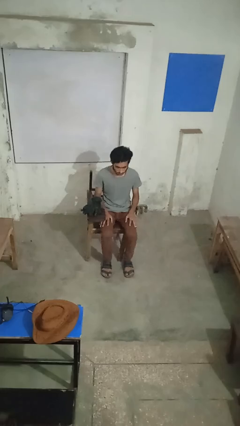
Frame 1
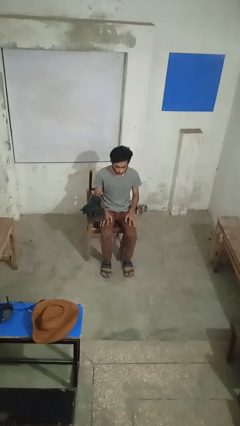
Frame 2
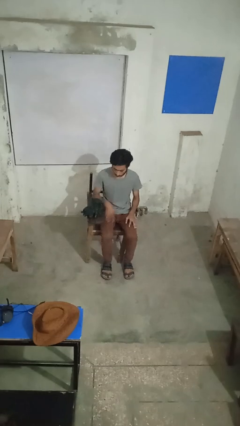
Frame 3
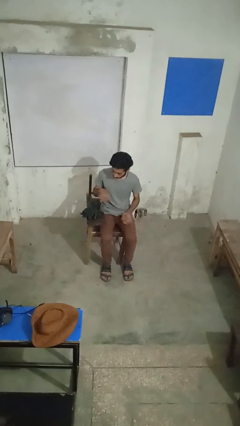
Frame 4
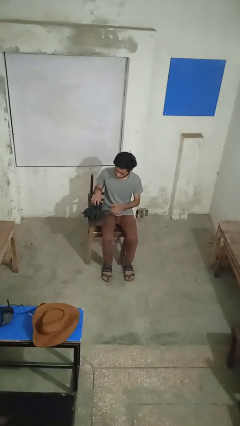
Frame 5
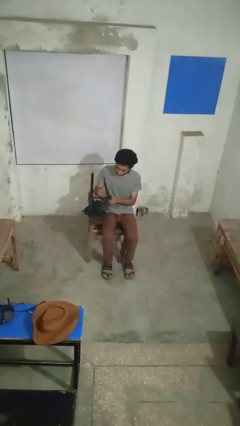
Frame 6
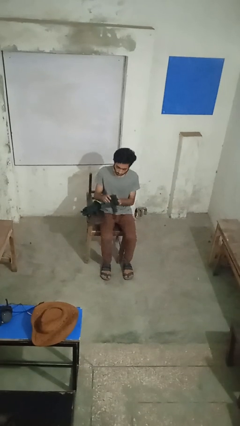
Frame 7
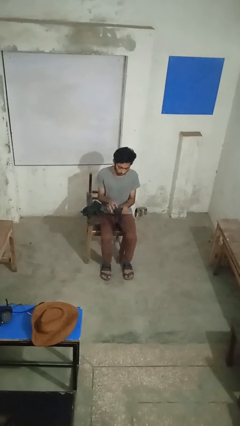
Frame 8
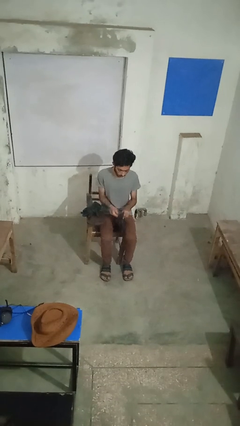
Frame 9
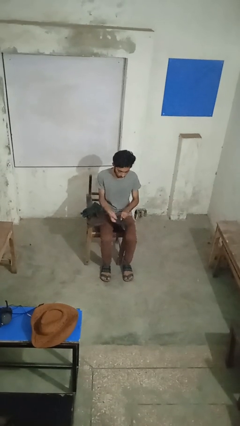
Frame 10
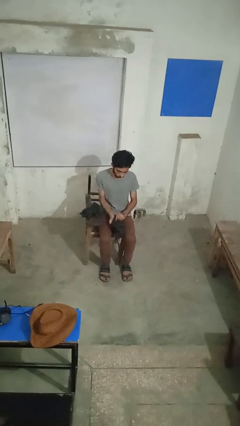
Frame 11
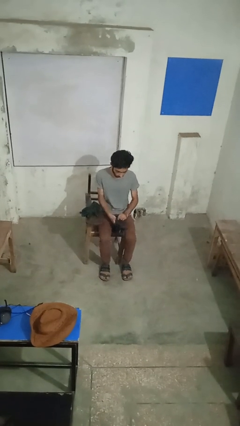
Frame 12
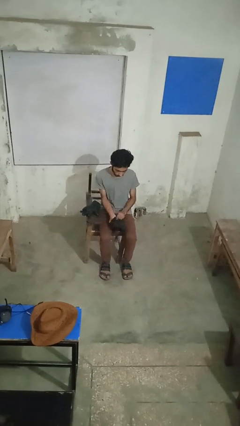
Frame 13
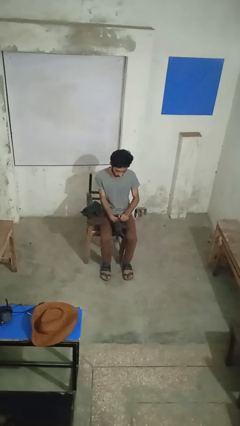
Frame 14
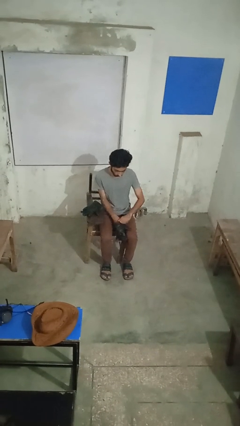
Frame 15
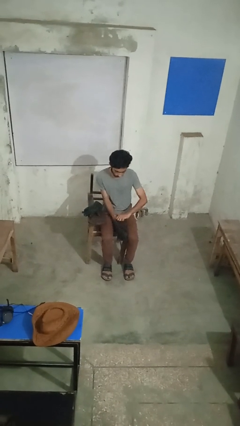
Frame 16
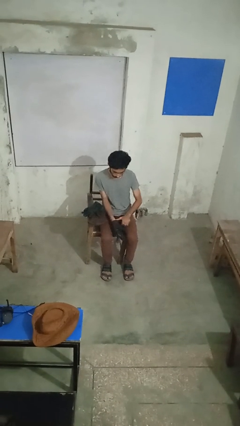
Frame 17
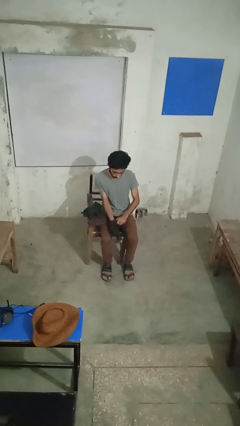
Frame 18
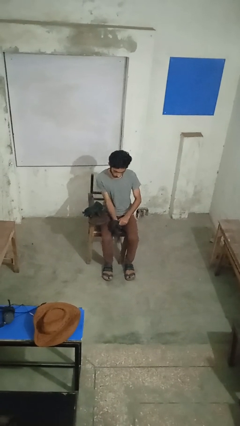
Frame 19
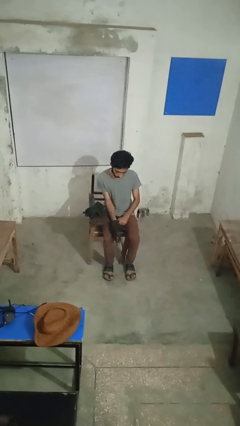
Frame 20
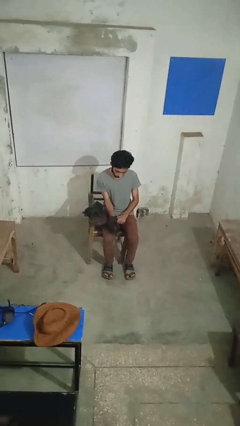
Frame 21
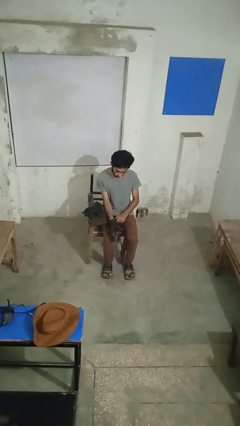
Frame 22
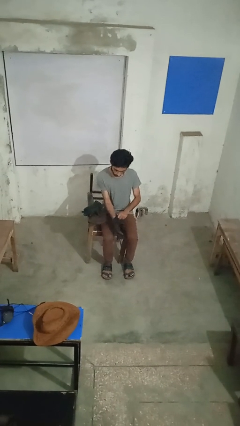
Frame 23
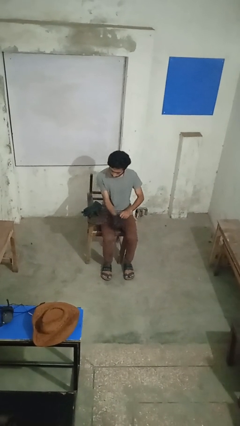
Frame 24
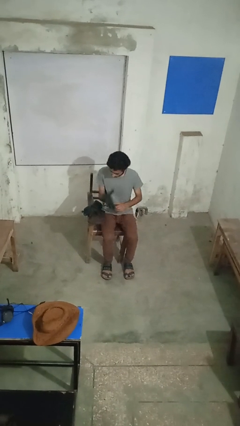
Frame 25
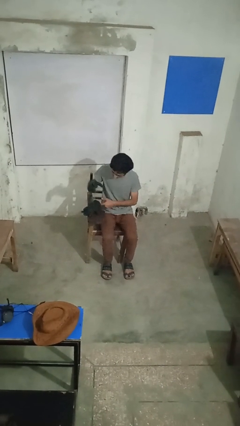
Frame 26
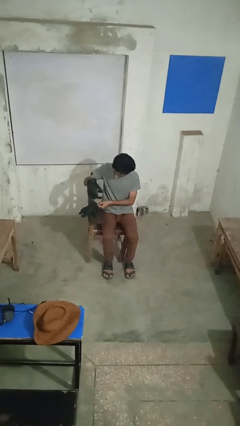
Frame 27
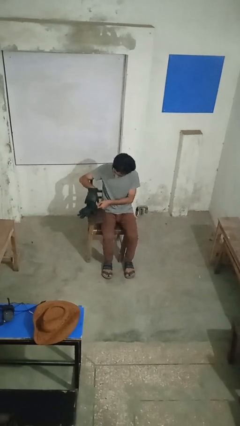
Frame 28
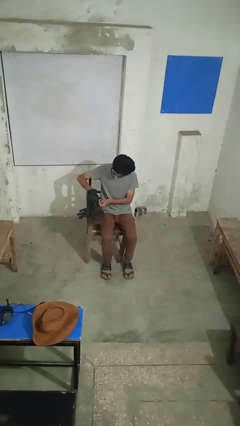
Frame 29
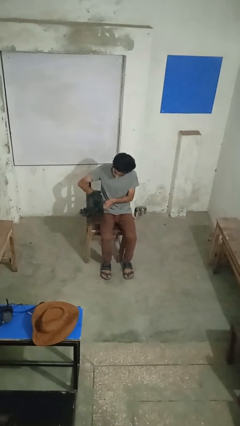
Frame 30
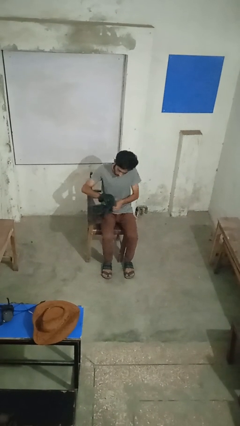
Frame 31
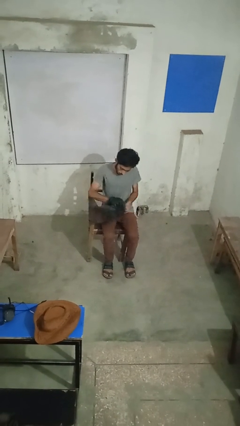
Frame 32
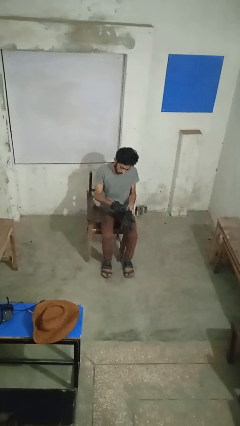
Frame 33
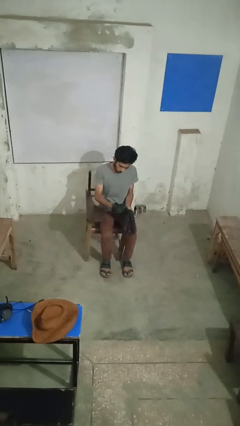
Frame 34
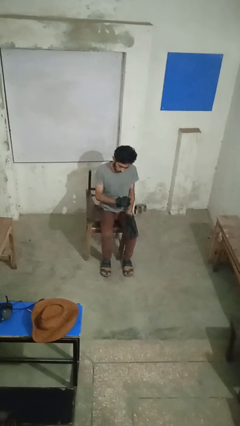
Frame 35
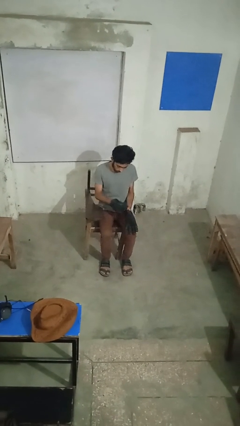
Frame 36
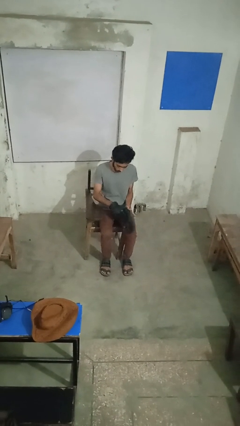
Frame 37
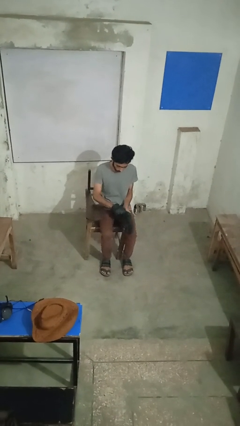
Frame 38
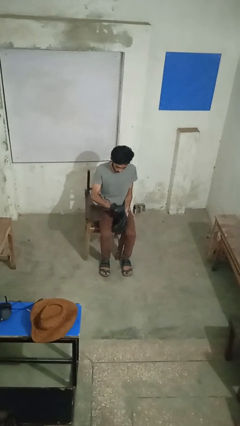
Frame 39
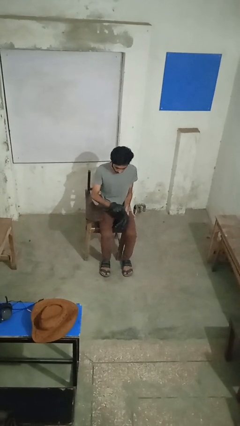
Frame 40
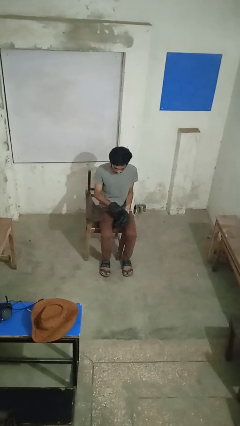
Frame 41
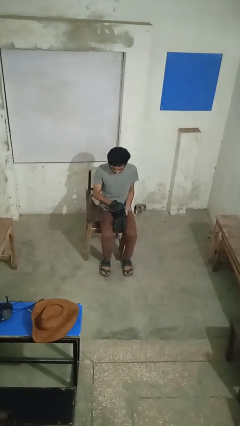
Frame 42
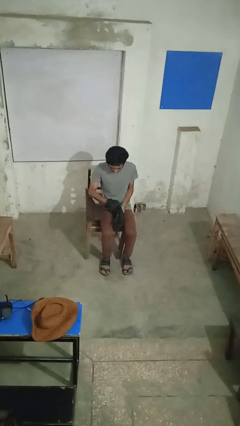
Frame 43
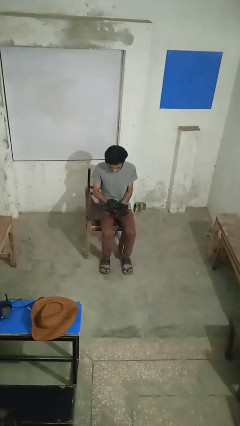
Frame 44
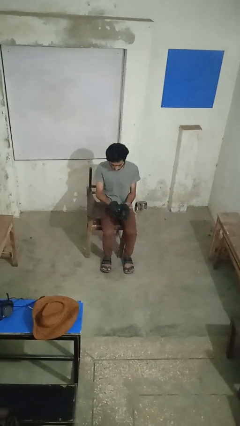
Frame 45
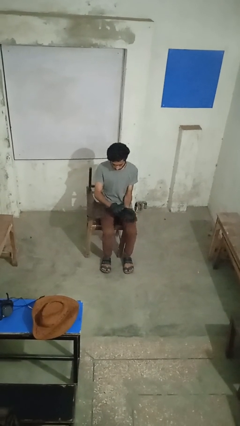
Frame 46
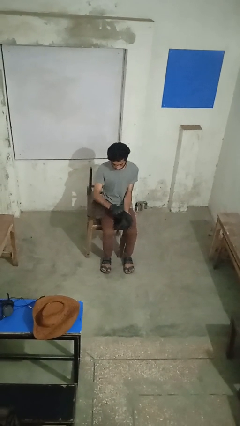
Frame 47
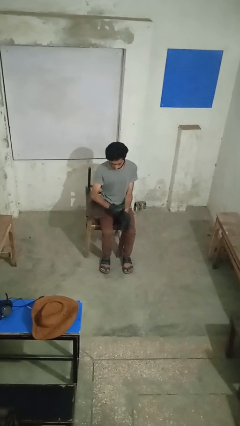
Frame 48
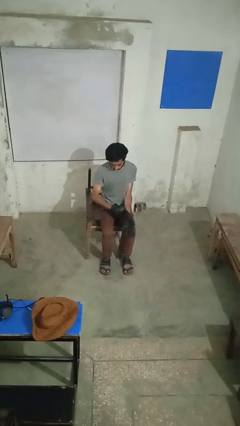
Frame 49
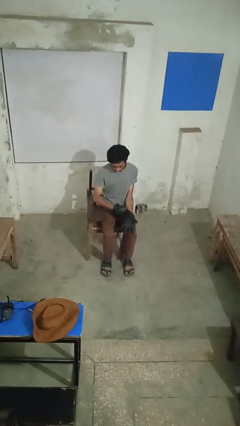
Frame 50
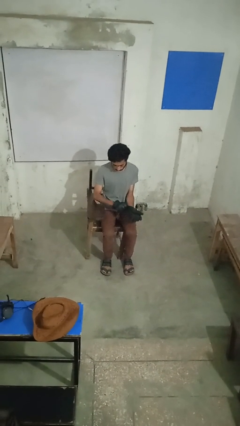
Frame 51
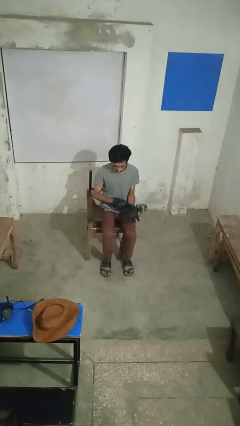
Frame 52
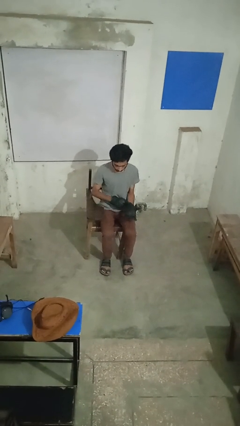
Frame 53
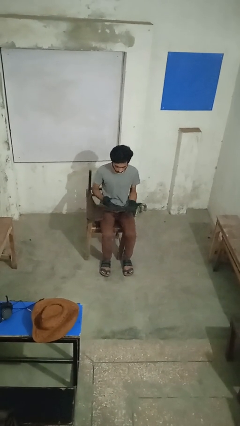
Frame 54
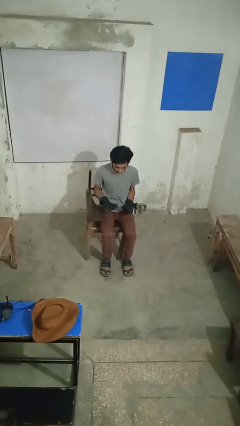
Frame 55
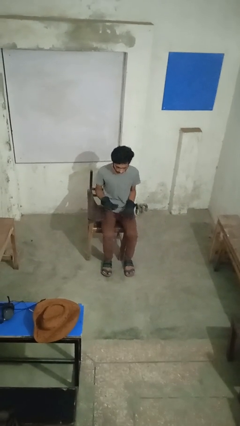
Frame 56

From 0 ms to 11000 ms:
person puts on gloves

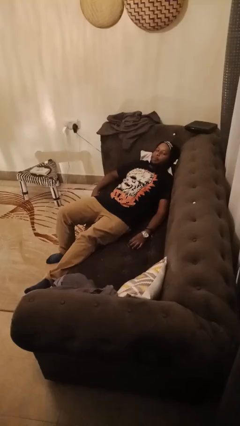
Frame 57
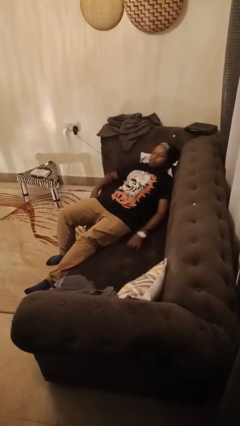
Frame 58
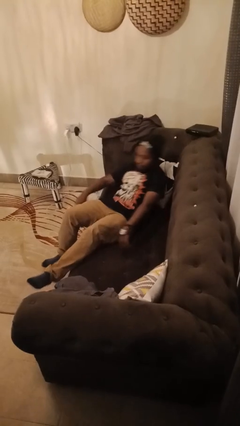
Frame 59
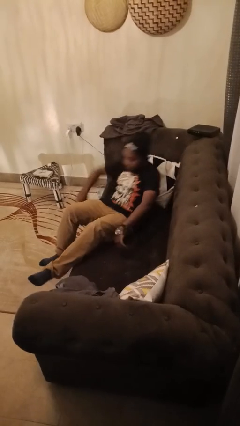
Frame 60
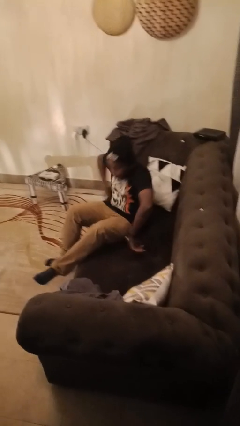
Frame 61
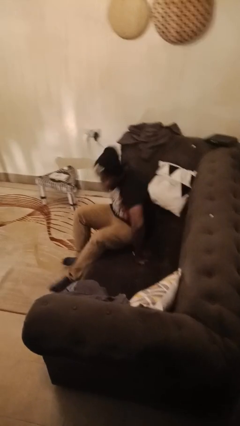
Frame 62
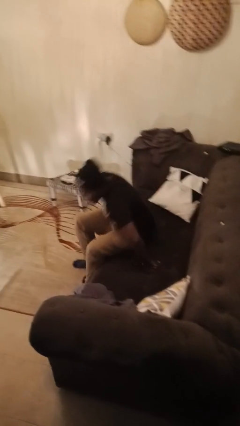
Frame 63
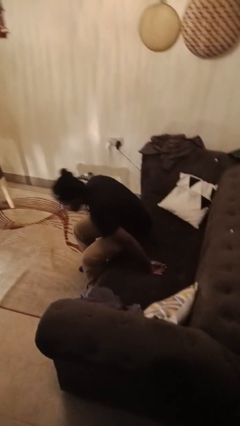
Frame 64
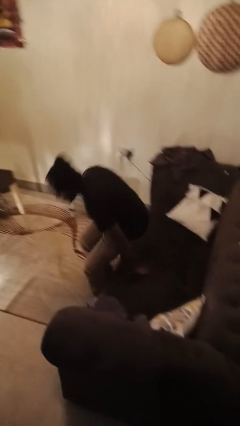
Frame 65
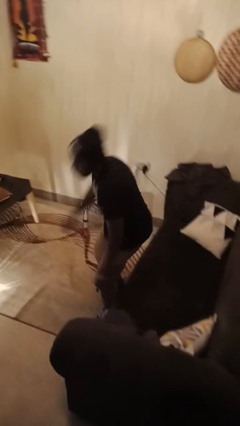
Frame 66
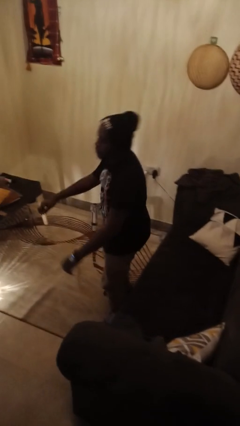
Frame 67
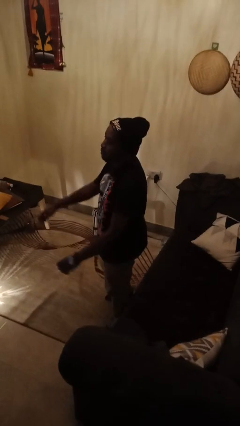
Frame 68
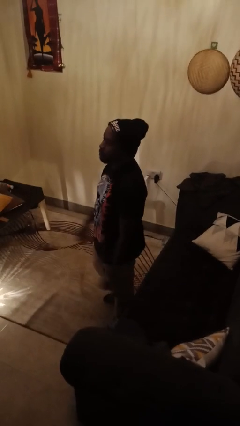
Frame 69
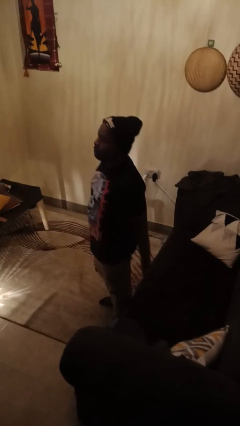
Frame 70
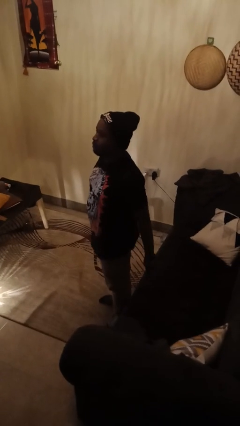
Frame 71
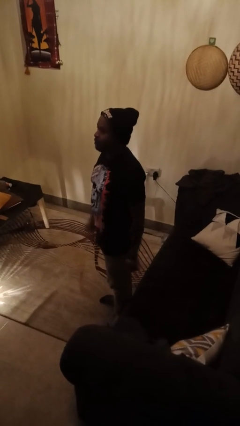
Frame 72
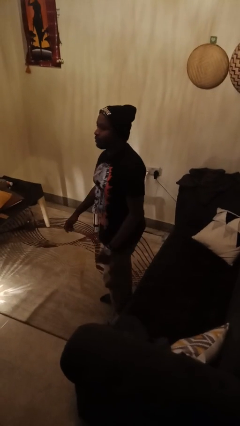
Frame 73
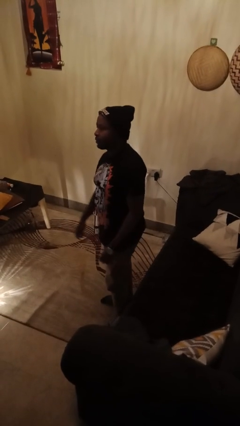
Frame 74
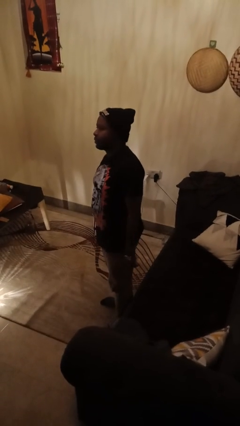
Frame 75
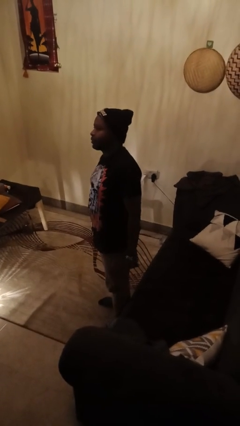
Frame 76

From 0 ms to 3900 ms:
person stands up

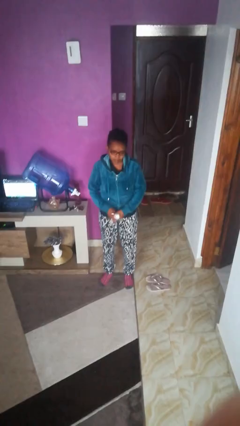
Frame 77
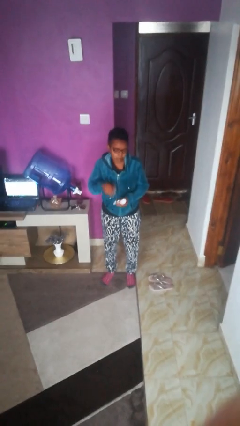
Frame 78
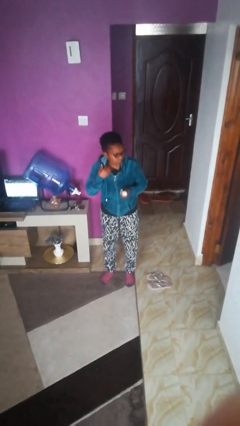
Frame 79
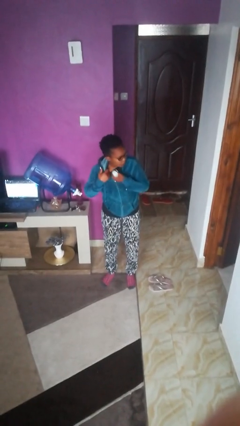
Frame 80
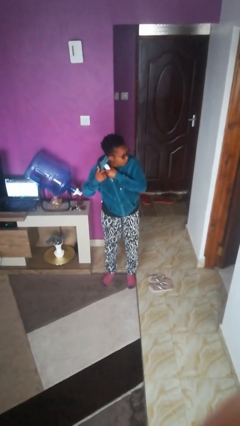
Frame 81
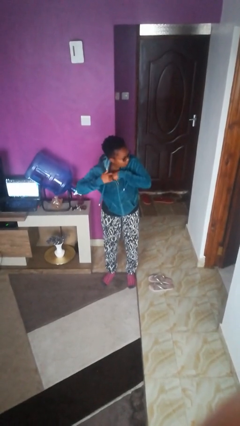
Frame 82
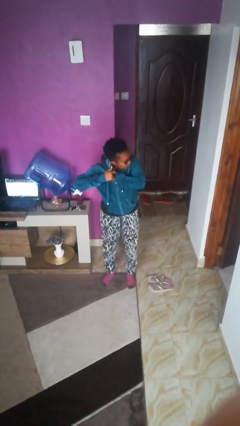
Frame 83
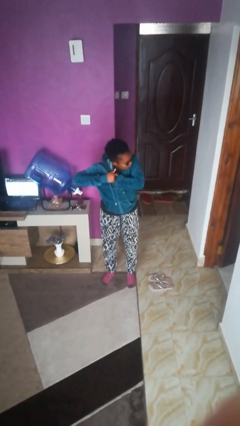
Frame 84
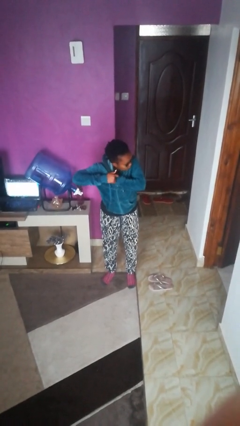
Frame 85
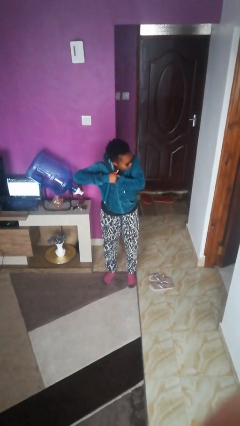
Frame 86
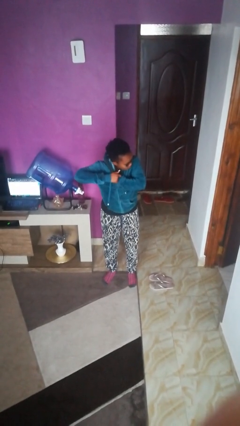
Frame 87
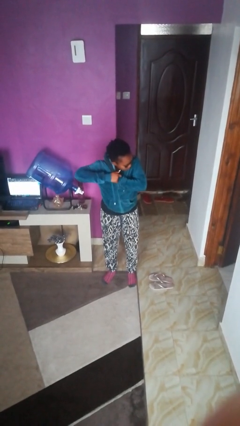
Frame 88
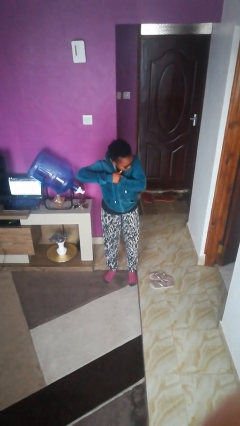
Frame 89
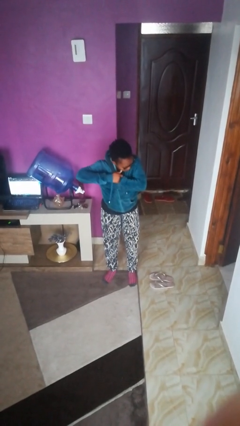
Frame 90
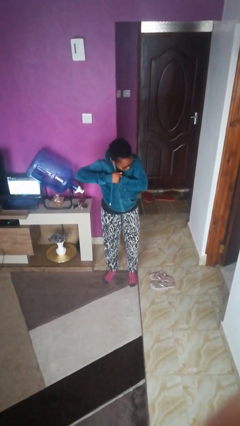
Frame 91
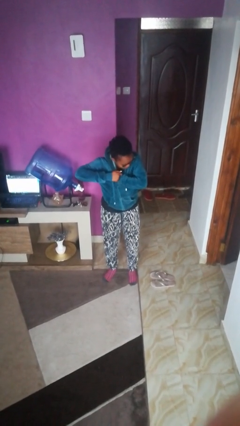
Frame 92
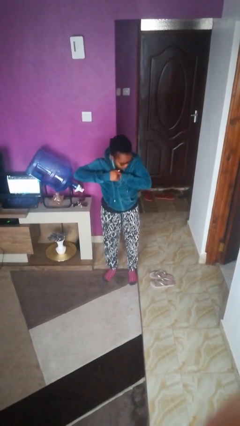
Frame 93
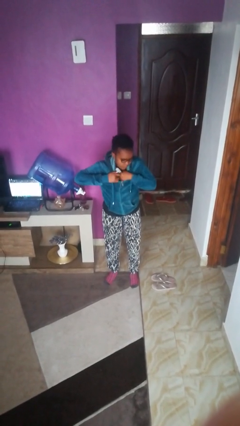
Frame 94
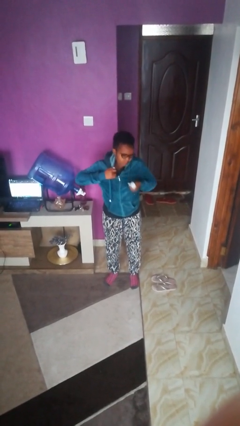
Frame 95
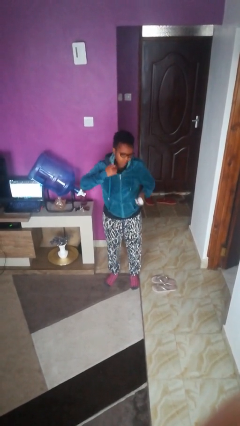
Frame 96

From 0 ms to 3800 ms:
person applies deodorant
